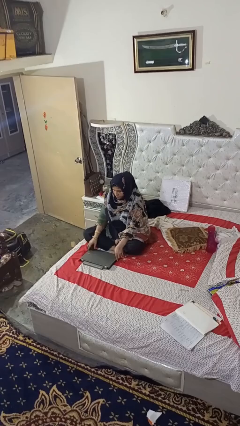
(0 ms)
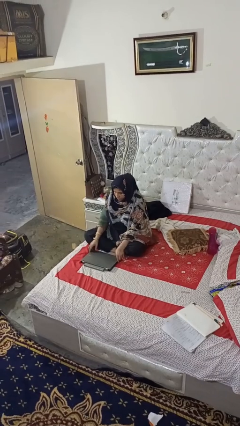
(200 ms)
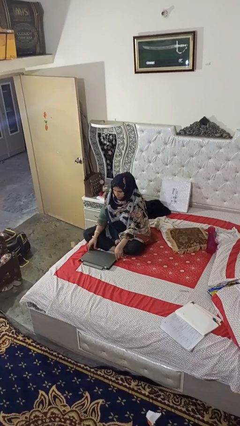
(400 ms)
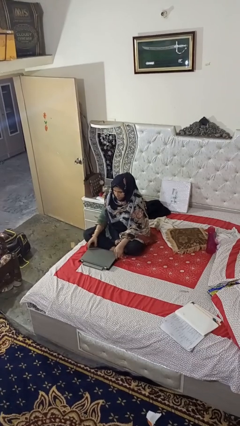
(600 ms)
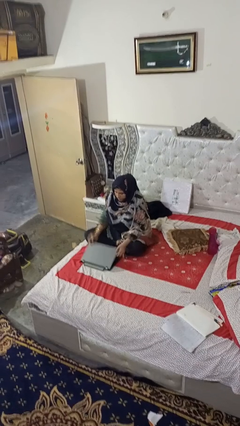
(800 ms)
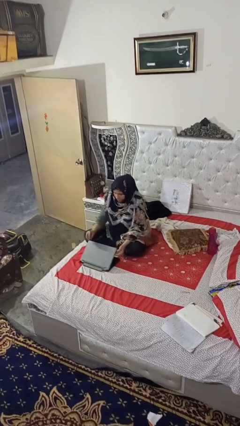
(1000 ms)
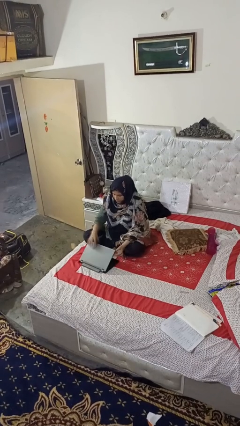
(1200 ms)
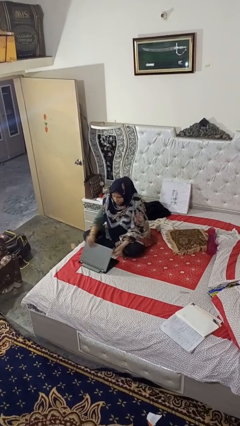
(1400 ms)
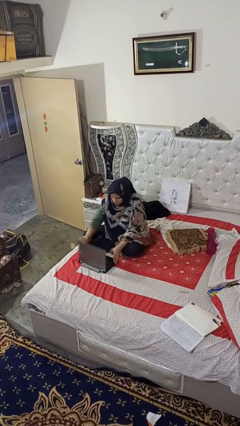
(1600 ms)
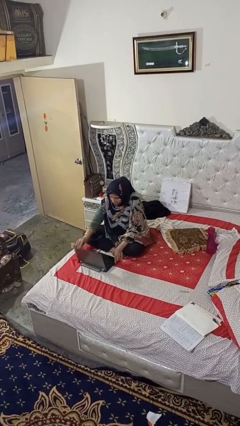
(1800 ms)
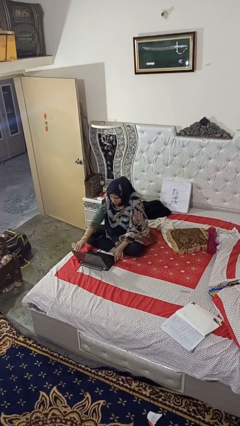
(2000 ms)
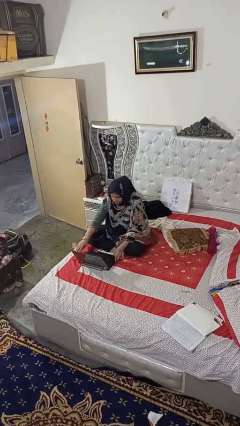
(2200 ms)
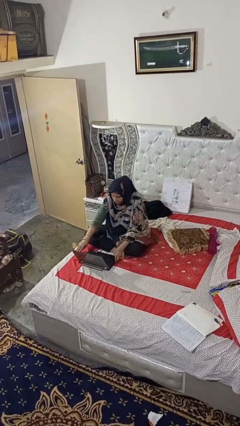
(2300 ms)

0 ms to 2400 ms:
person opens laptop

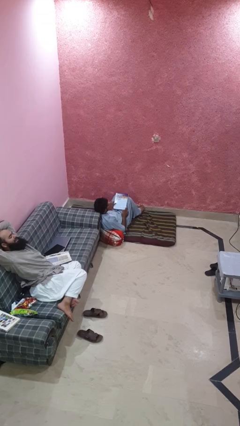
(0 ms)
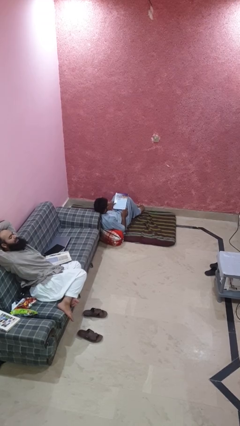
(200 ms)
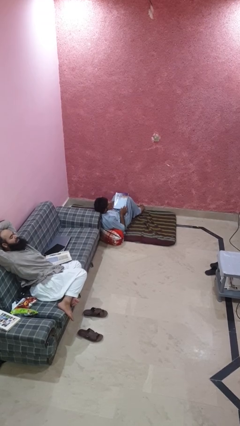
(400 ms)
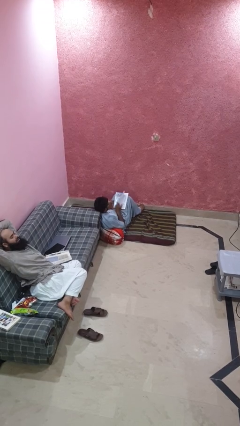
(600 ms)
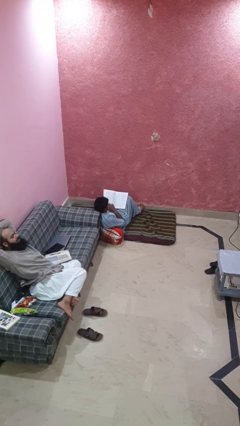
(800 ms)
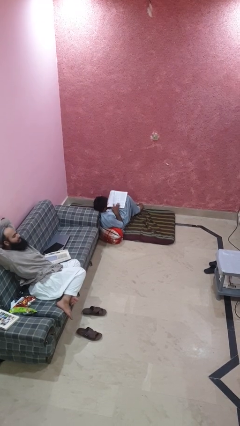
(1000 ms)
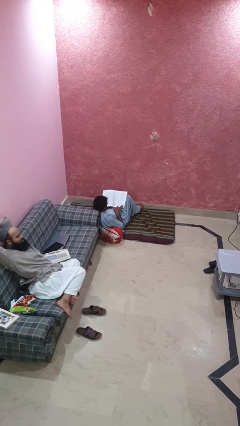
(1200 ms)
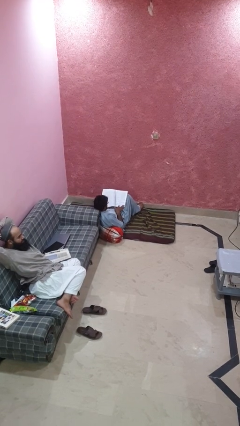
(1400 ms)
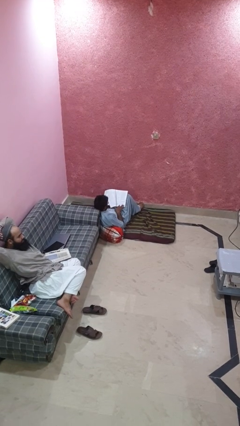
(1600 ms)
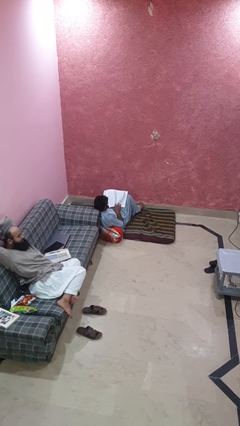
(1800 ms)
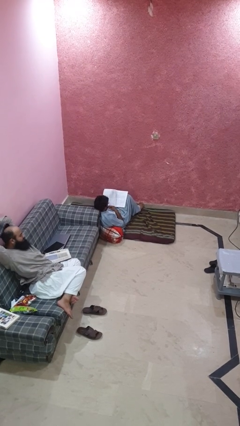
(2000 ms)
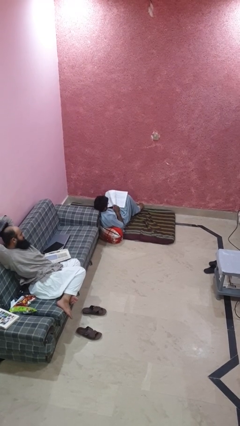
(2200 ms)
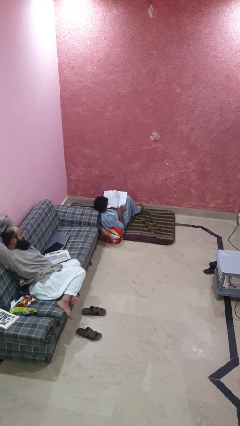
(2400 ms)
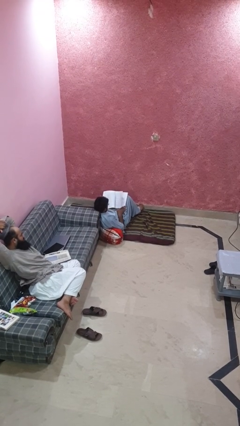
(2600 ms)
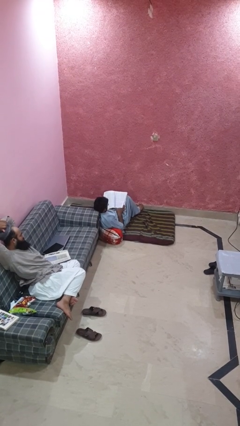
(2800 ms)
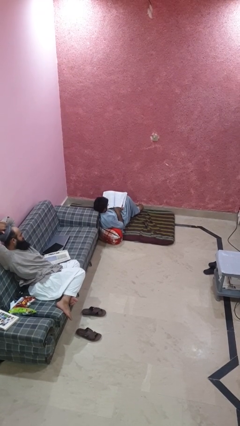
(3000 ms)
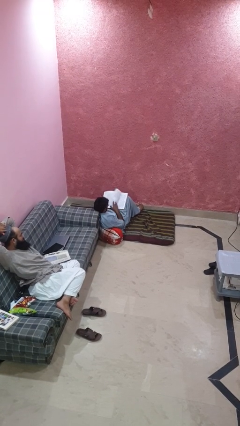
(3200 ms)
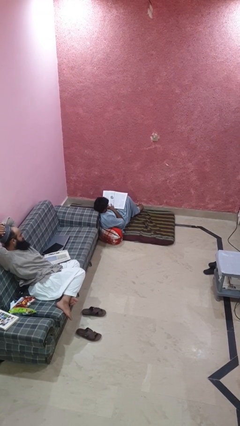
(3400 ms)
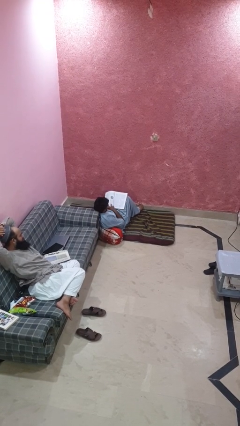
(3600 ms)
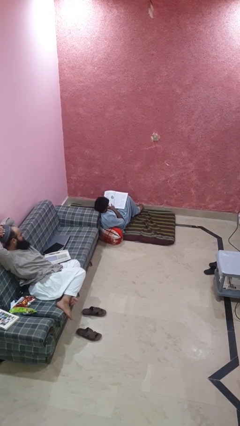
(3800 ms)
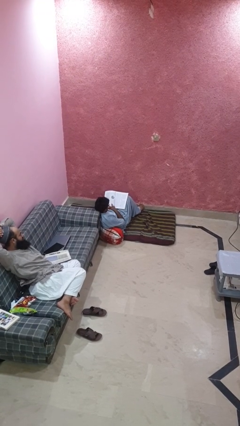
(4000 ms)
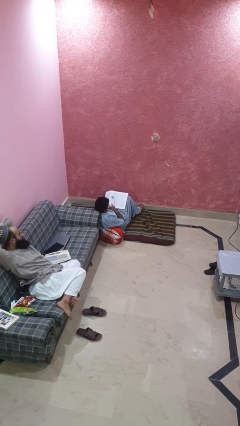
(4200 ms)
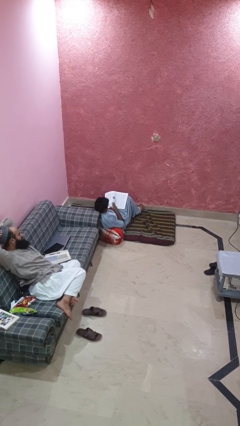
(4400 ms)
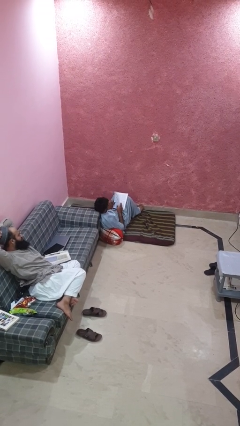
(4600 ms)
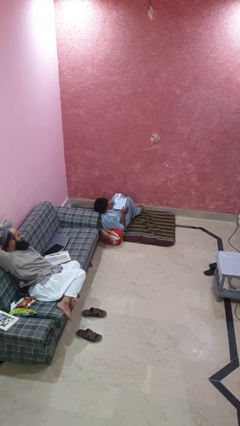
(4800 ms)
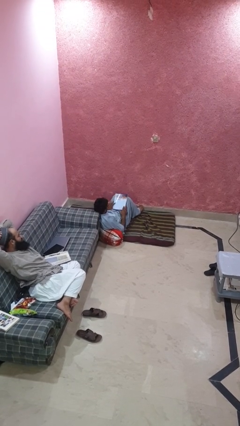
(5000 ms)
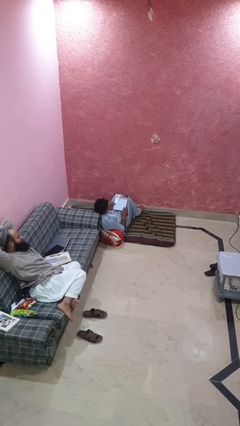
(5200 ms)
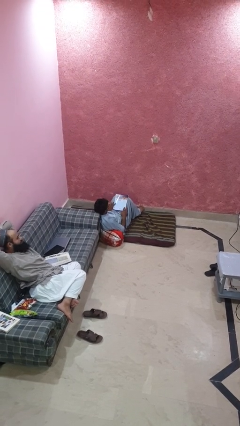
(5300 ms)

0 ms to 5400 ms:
person reads magazine

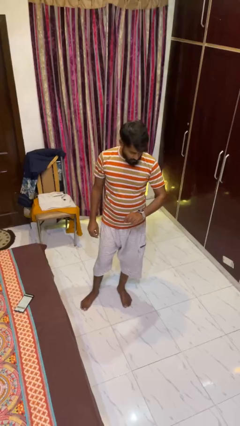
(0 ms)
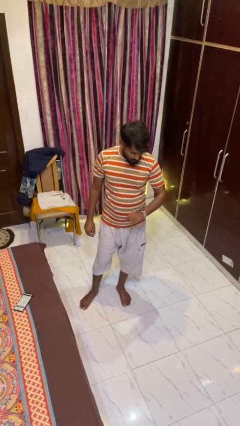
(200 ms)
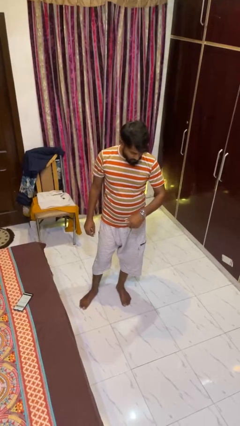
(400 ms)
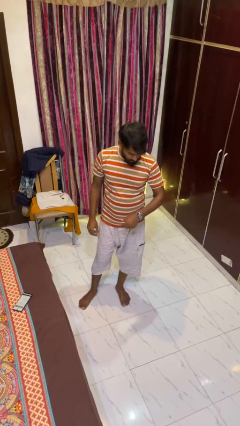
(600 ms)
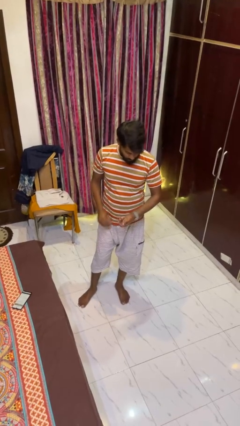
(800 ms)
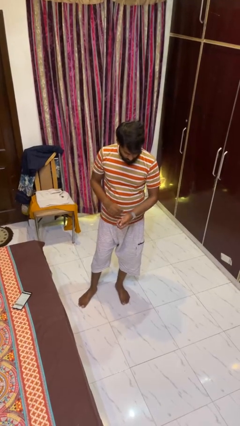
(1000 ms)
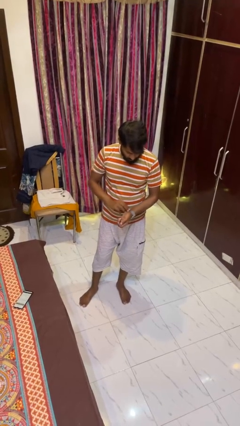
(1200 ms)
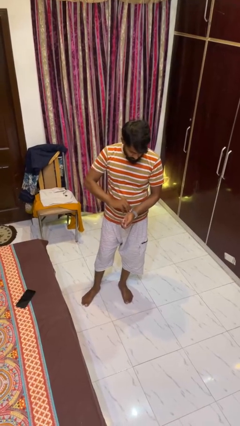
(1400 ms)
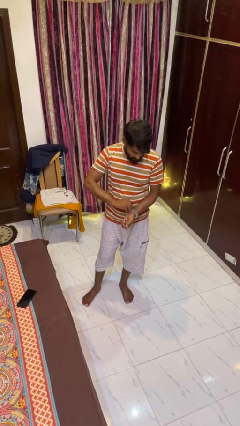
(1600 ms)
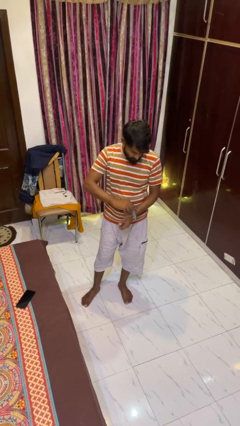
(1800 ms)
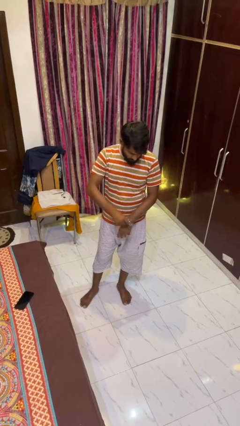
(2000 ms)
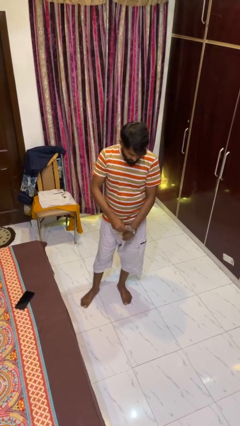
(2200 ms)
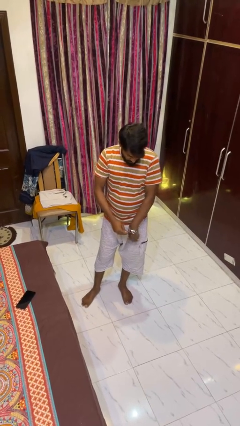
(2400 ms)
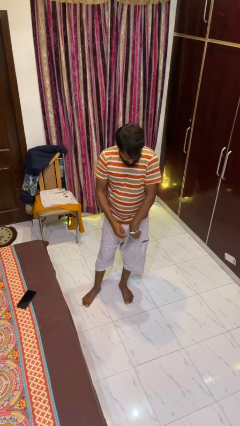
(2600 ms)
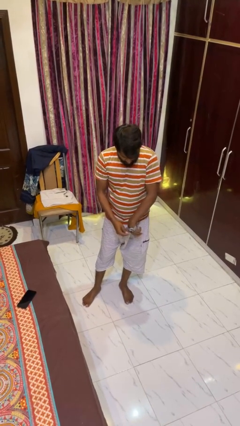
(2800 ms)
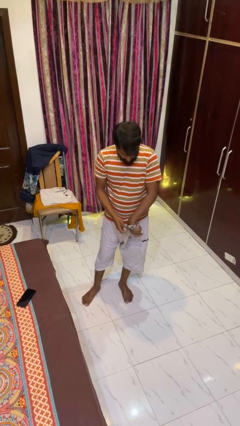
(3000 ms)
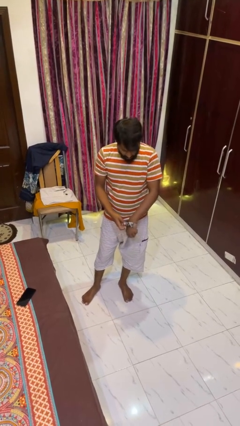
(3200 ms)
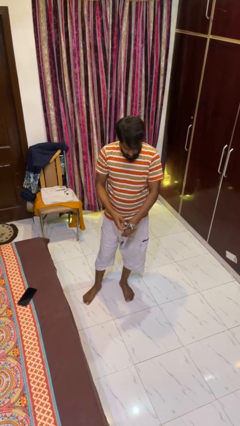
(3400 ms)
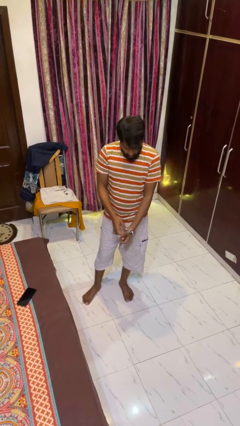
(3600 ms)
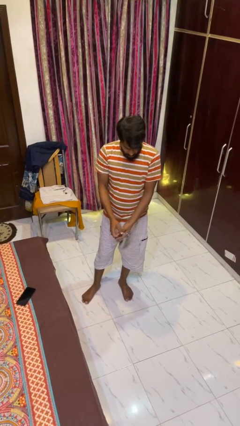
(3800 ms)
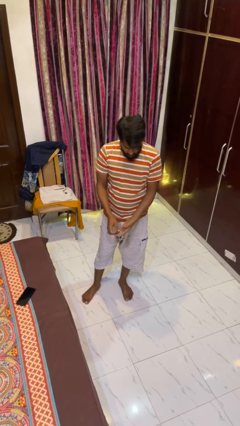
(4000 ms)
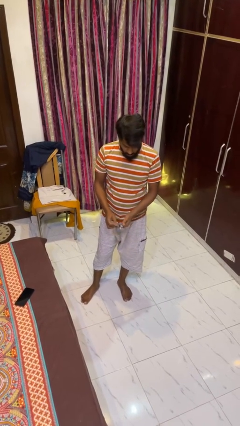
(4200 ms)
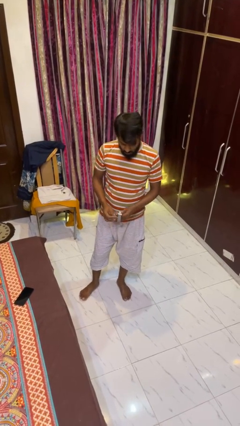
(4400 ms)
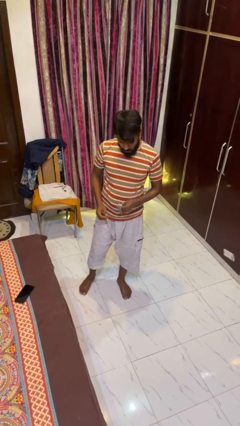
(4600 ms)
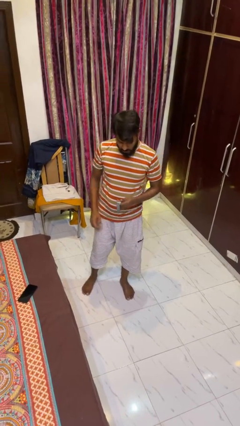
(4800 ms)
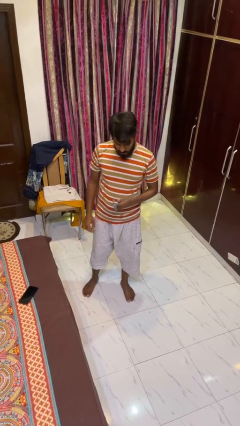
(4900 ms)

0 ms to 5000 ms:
person takes off wristwatch

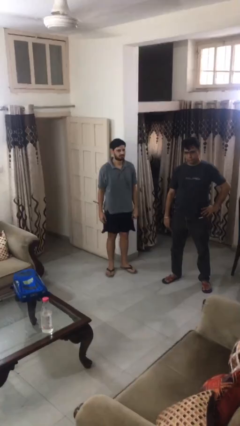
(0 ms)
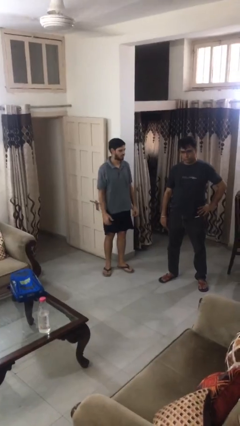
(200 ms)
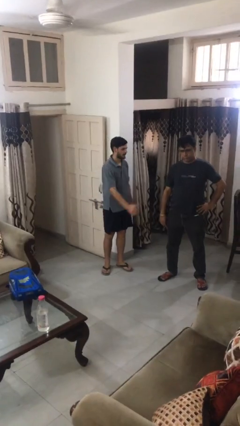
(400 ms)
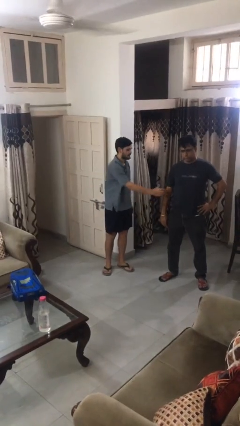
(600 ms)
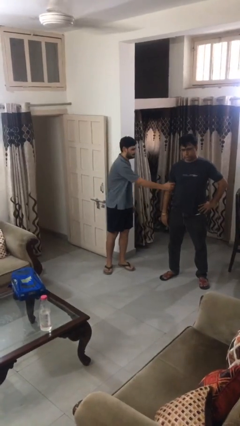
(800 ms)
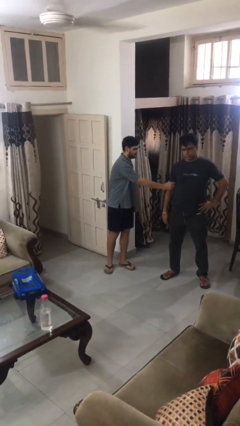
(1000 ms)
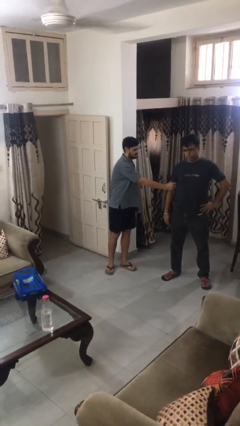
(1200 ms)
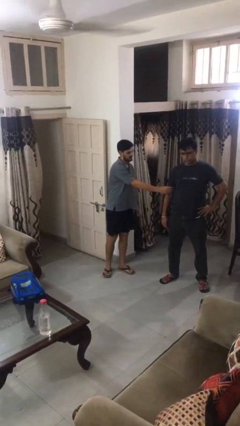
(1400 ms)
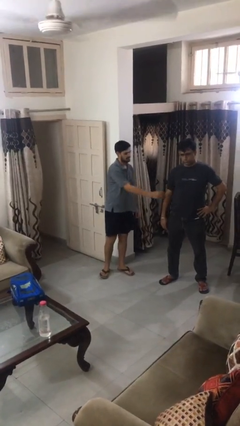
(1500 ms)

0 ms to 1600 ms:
person grabs person by bicep

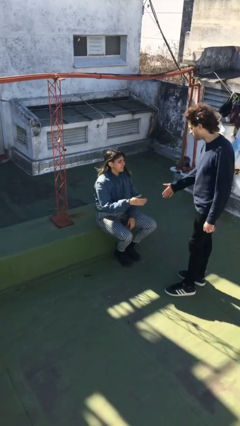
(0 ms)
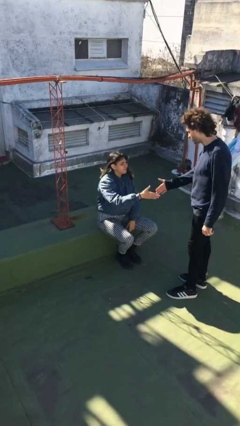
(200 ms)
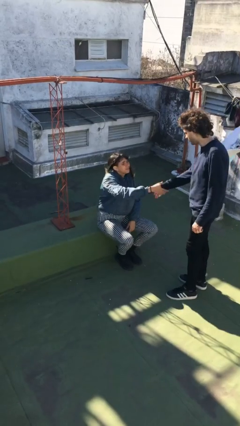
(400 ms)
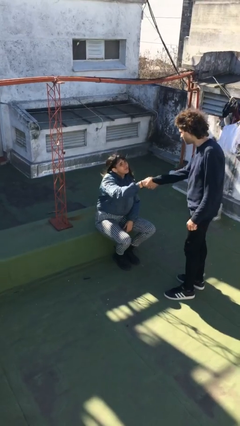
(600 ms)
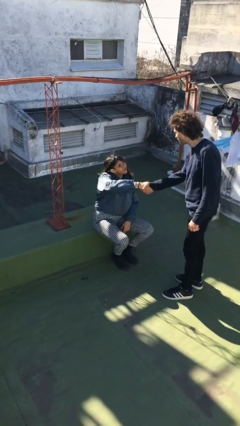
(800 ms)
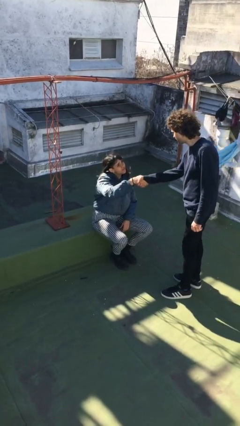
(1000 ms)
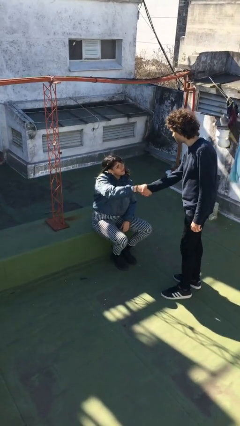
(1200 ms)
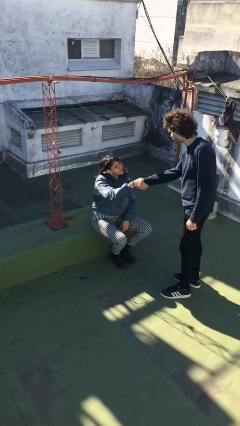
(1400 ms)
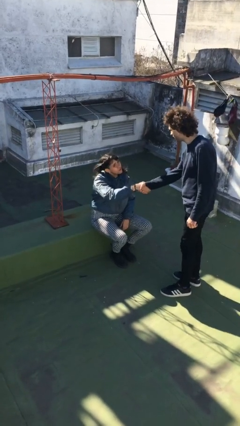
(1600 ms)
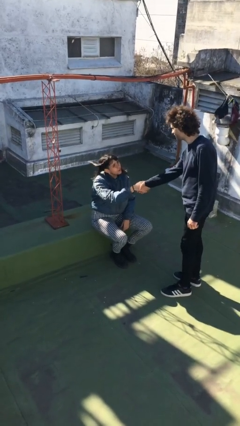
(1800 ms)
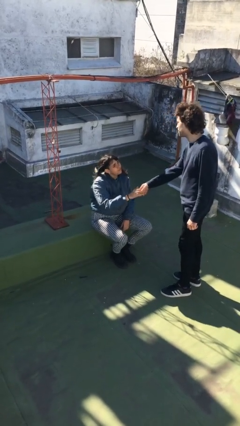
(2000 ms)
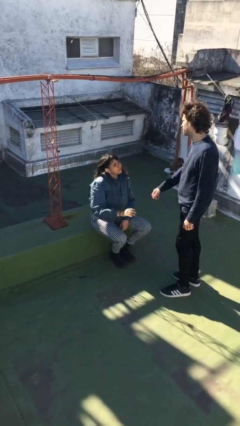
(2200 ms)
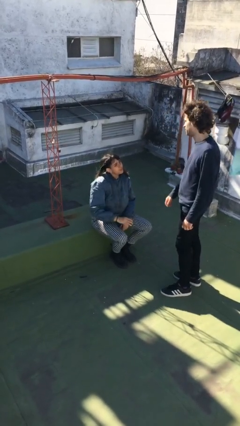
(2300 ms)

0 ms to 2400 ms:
person shakes hand

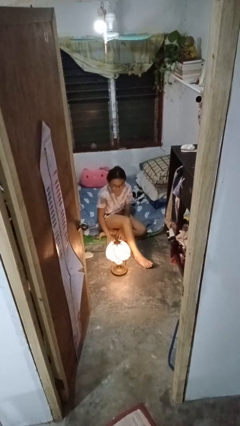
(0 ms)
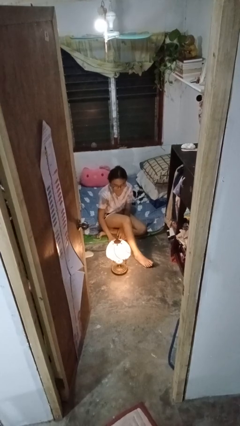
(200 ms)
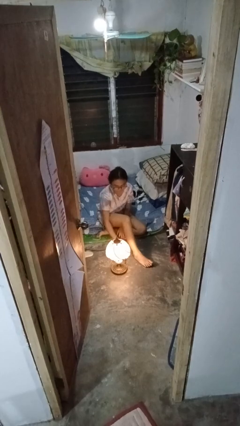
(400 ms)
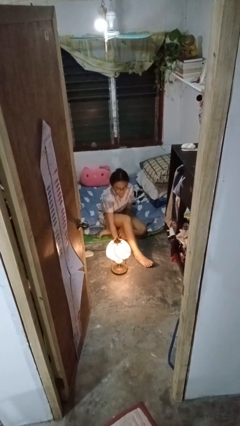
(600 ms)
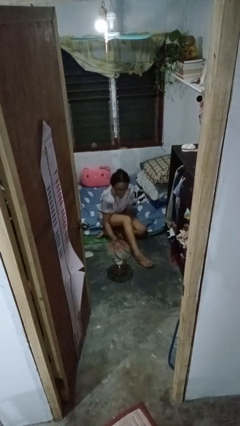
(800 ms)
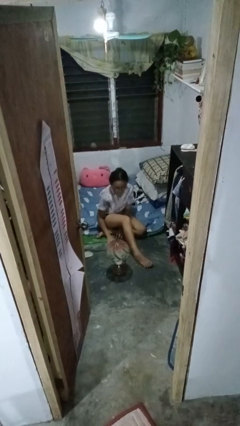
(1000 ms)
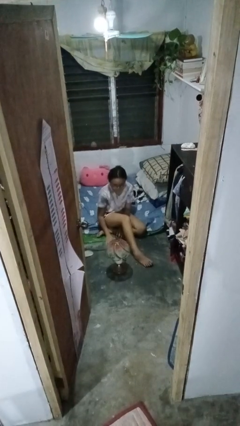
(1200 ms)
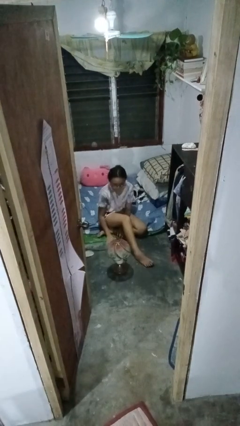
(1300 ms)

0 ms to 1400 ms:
person turns off lamp
